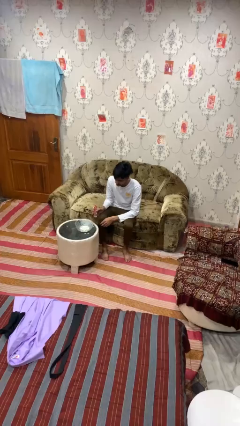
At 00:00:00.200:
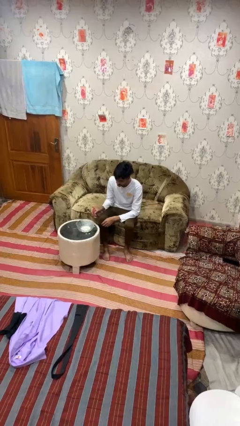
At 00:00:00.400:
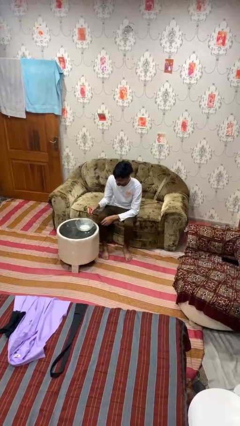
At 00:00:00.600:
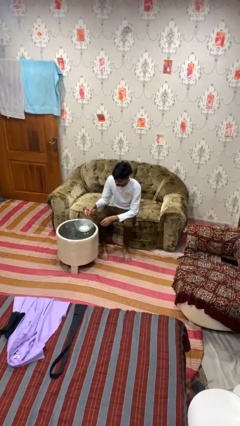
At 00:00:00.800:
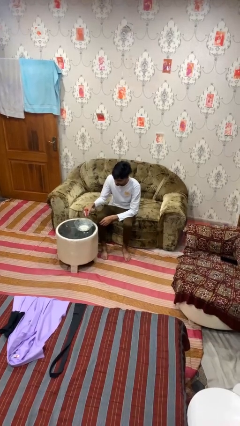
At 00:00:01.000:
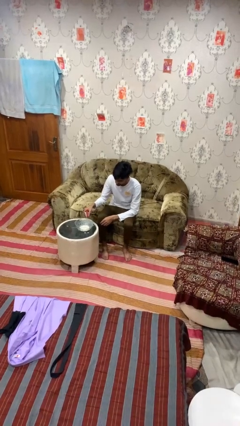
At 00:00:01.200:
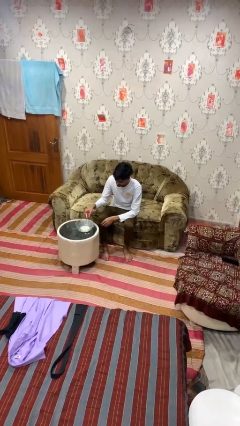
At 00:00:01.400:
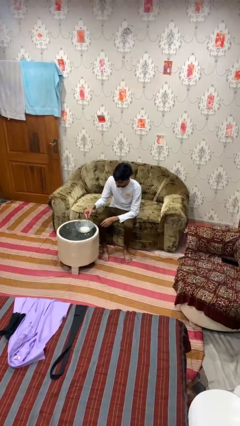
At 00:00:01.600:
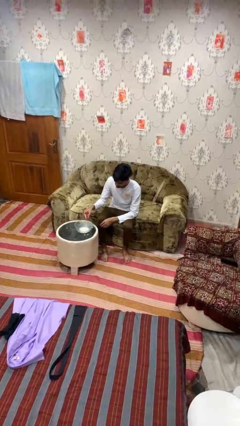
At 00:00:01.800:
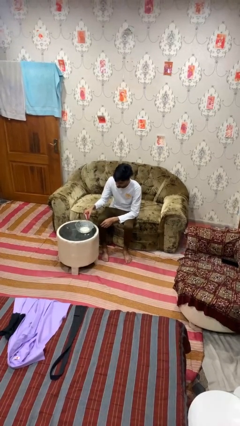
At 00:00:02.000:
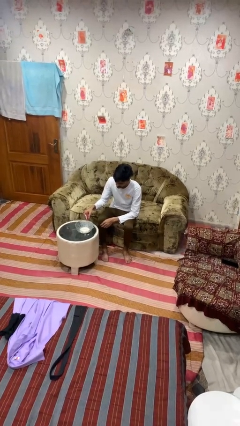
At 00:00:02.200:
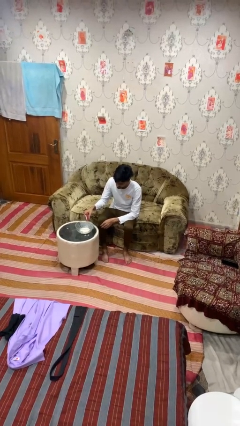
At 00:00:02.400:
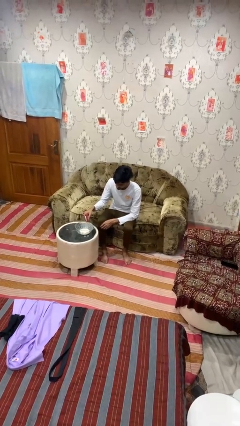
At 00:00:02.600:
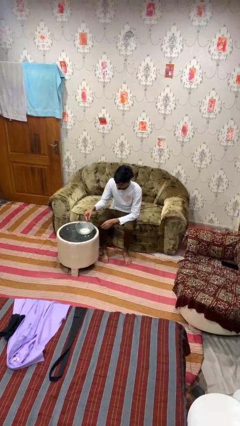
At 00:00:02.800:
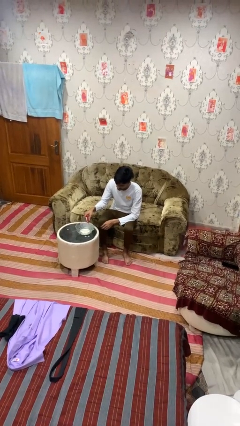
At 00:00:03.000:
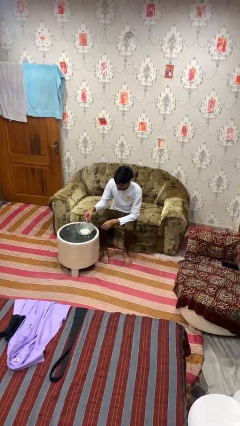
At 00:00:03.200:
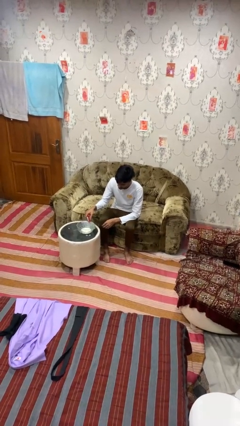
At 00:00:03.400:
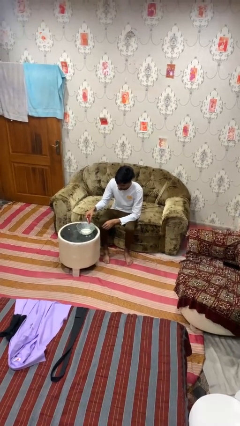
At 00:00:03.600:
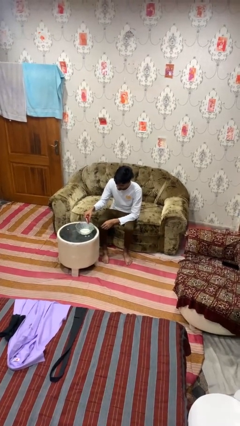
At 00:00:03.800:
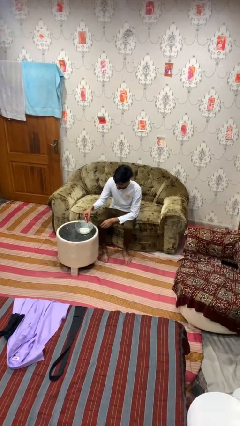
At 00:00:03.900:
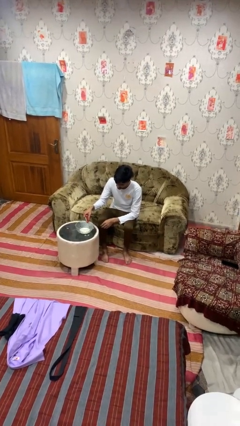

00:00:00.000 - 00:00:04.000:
person pours into bowl

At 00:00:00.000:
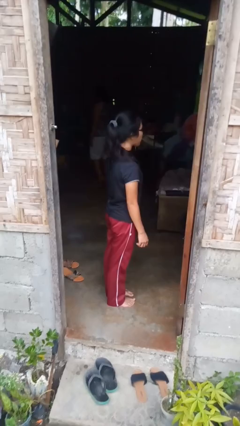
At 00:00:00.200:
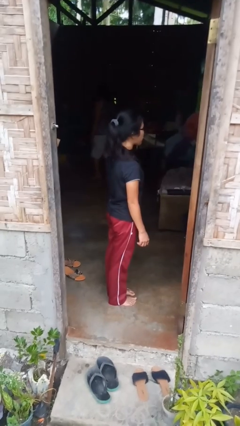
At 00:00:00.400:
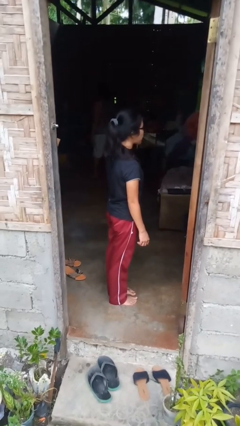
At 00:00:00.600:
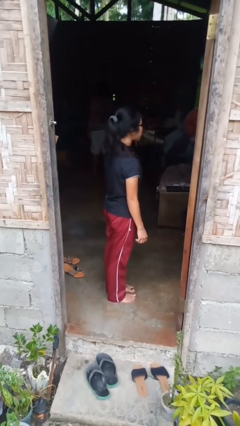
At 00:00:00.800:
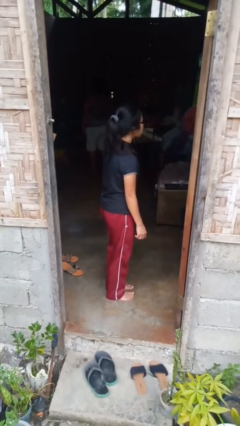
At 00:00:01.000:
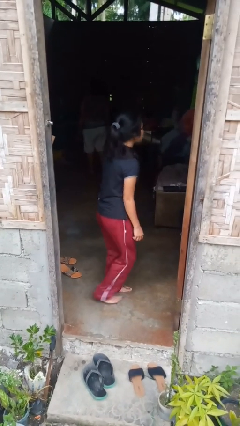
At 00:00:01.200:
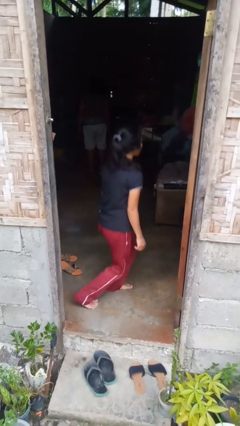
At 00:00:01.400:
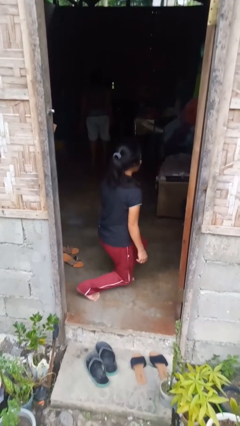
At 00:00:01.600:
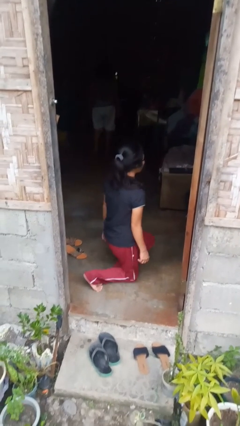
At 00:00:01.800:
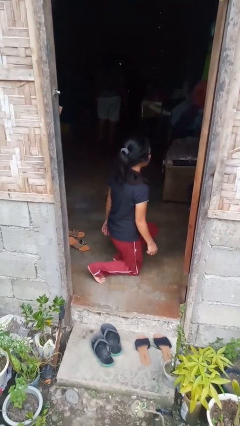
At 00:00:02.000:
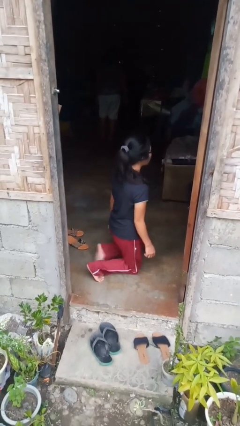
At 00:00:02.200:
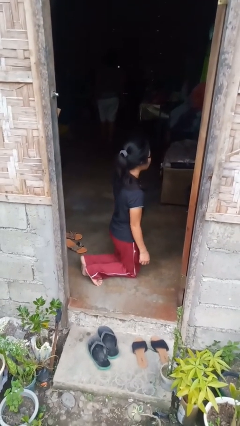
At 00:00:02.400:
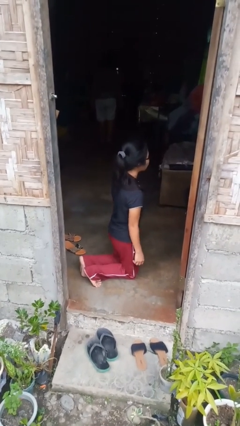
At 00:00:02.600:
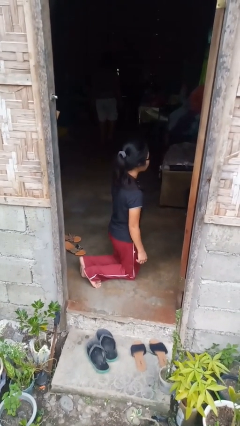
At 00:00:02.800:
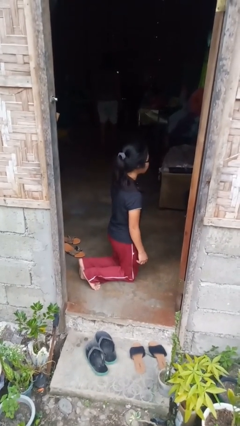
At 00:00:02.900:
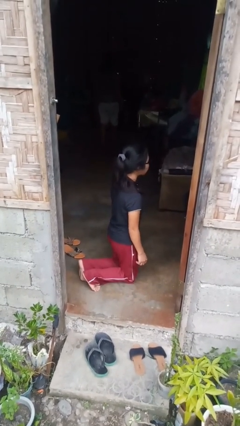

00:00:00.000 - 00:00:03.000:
person kneels

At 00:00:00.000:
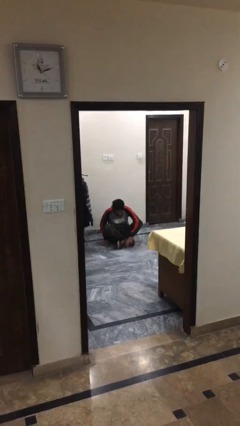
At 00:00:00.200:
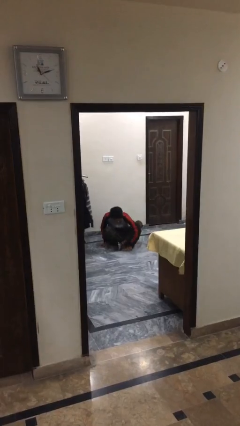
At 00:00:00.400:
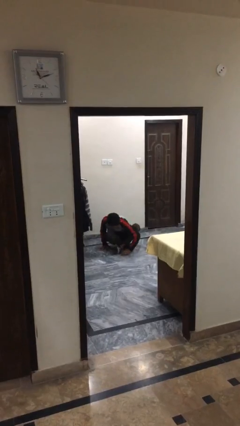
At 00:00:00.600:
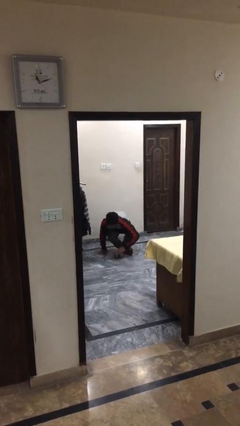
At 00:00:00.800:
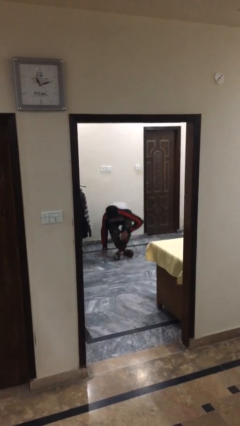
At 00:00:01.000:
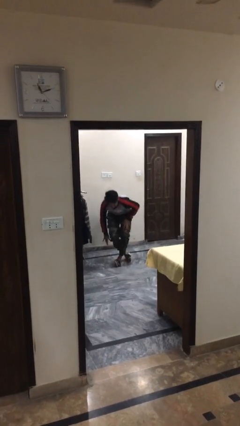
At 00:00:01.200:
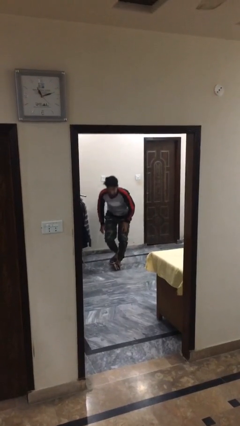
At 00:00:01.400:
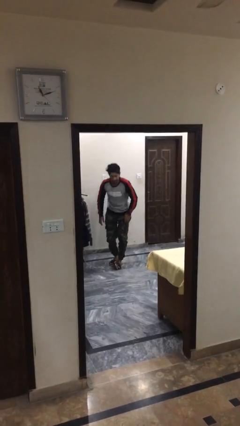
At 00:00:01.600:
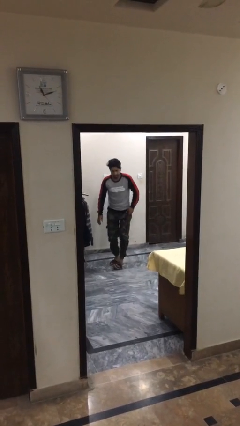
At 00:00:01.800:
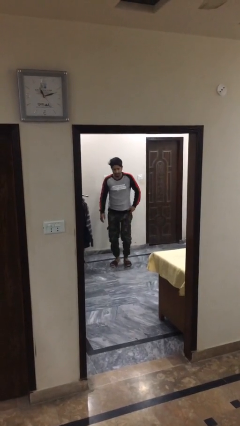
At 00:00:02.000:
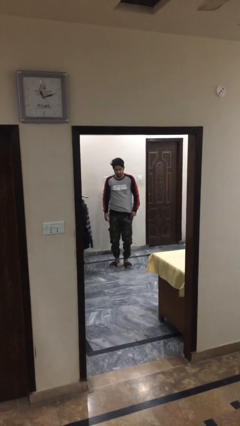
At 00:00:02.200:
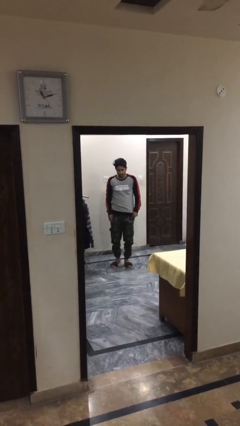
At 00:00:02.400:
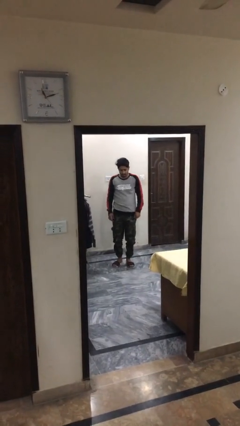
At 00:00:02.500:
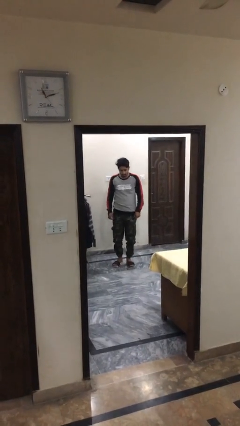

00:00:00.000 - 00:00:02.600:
person stands up

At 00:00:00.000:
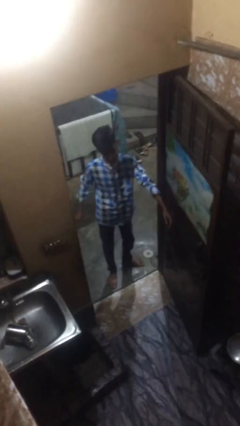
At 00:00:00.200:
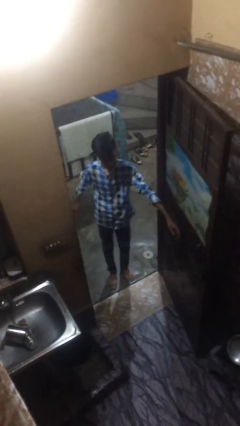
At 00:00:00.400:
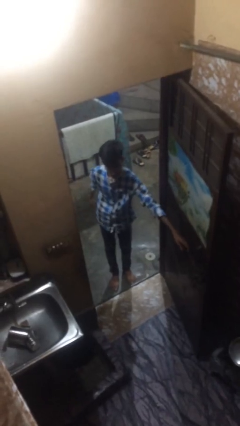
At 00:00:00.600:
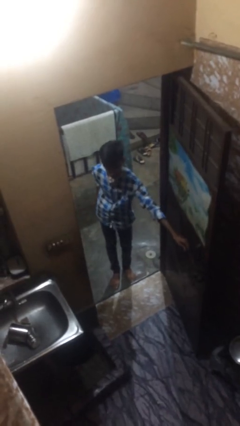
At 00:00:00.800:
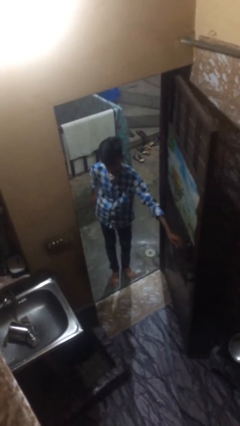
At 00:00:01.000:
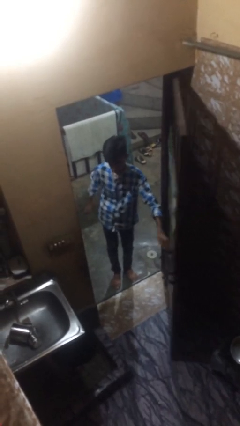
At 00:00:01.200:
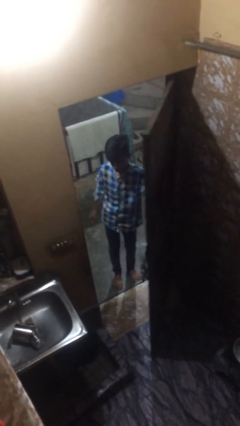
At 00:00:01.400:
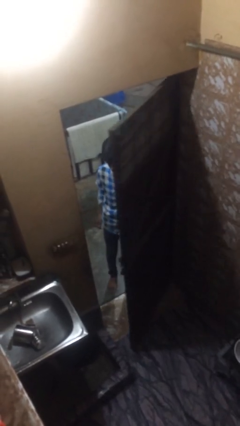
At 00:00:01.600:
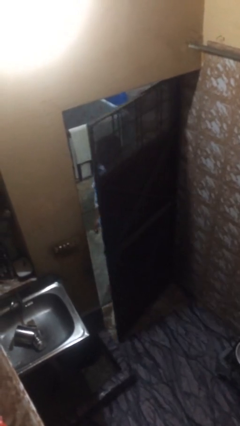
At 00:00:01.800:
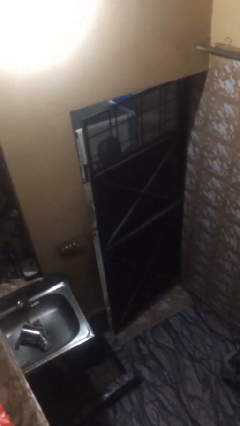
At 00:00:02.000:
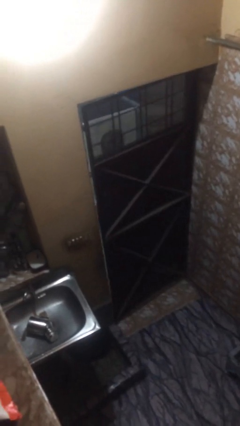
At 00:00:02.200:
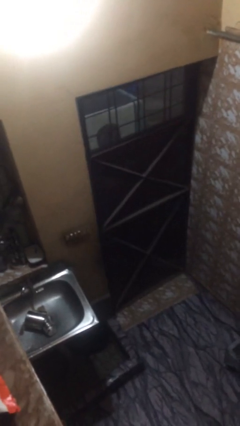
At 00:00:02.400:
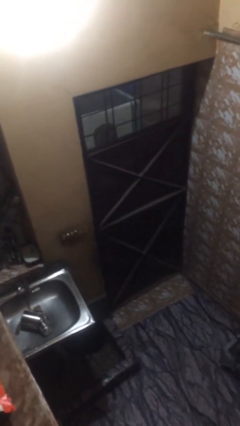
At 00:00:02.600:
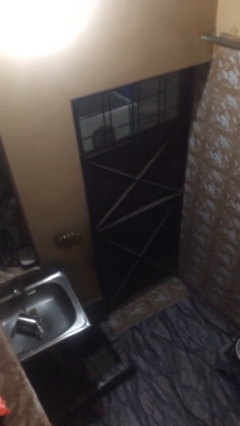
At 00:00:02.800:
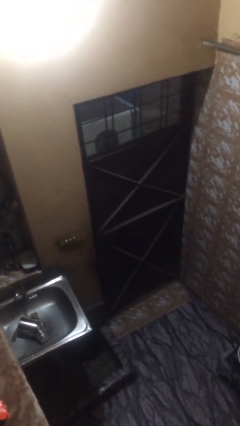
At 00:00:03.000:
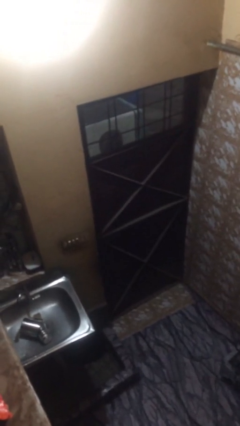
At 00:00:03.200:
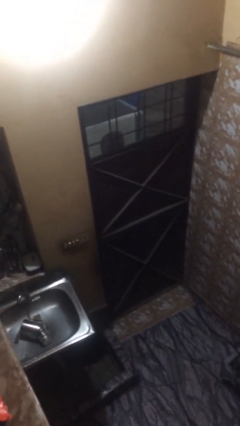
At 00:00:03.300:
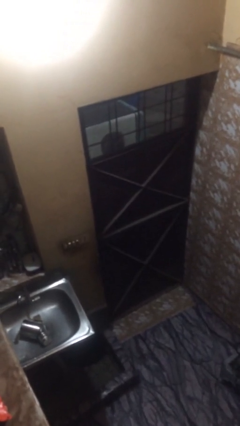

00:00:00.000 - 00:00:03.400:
person closes facility door

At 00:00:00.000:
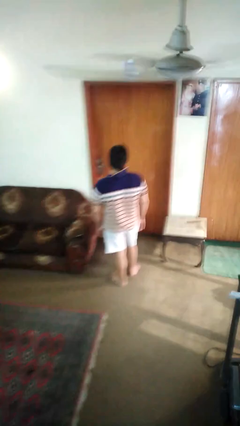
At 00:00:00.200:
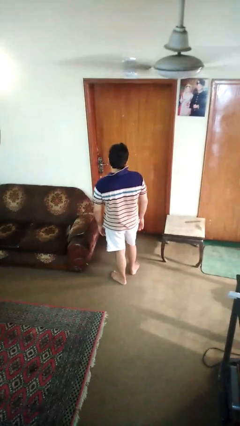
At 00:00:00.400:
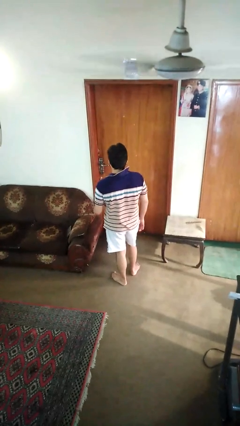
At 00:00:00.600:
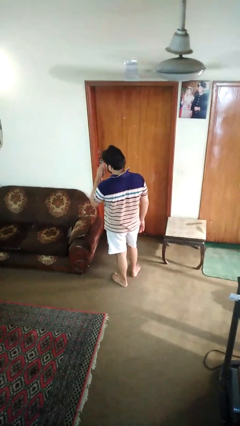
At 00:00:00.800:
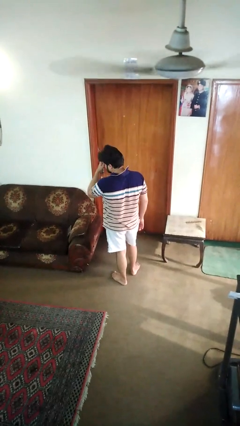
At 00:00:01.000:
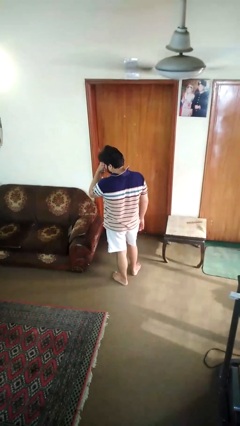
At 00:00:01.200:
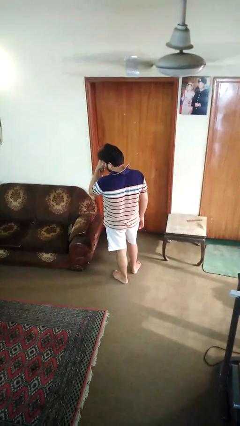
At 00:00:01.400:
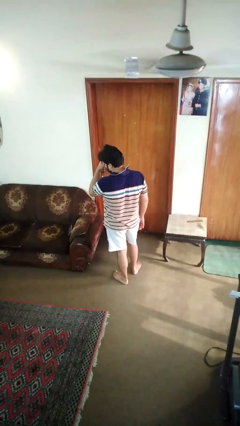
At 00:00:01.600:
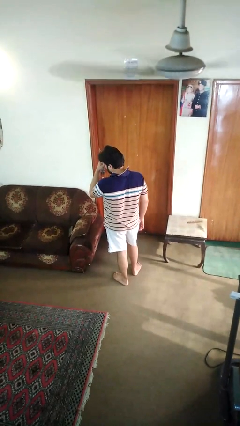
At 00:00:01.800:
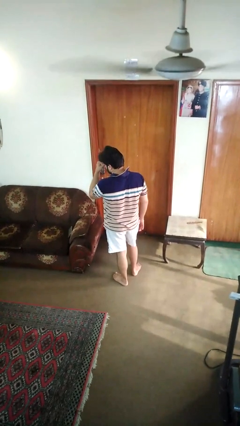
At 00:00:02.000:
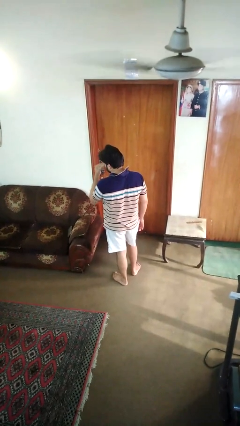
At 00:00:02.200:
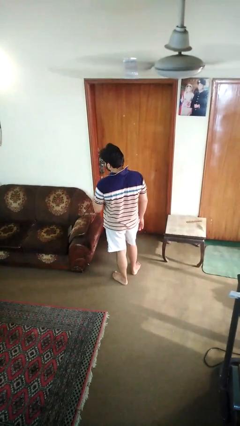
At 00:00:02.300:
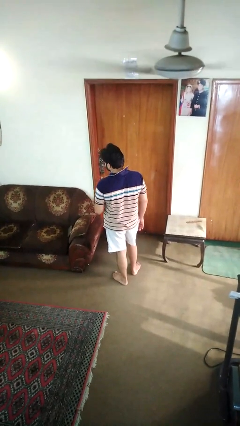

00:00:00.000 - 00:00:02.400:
person rubs eyes

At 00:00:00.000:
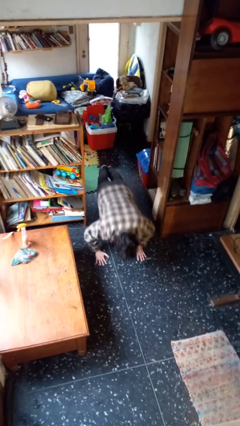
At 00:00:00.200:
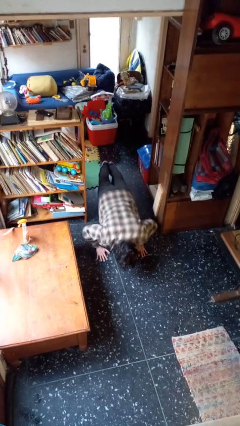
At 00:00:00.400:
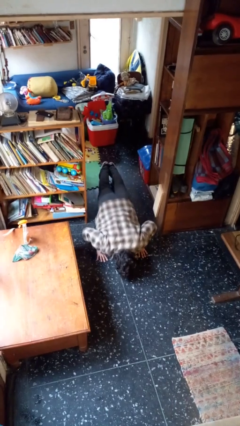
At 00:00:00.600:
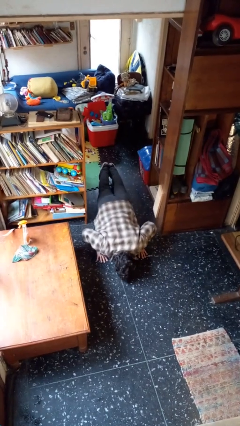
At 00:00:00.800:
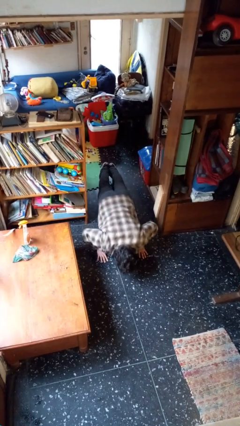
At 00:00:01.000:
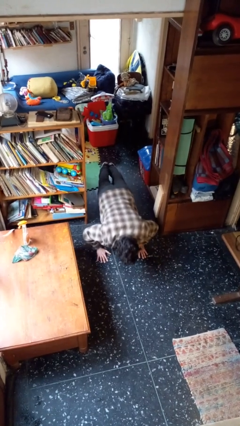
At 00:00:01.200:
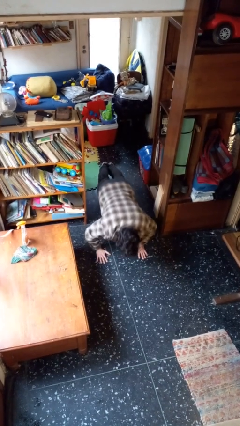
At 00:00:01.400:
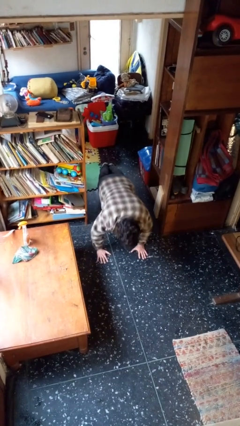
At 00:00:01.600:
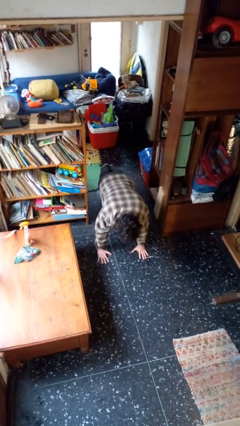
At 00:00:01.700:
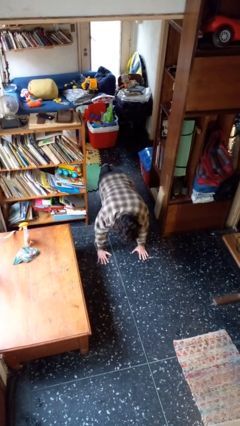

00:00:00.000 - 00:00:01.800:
person exercises with pushup
